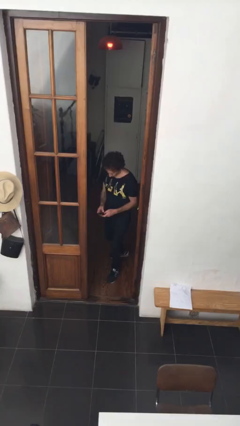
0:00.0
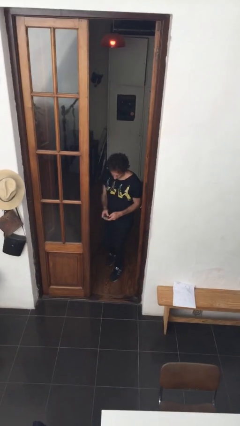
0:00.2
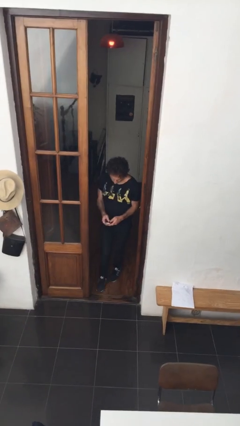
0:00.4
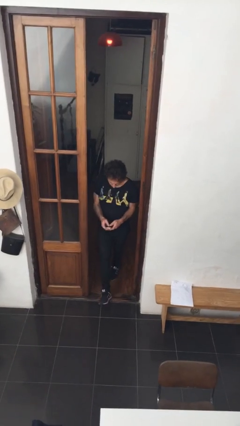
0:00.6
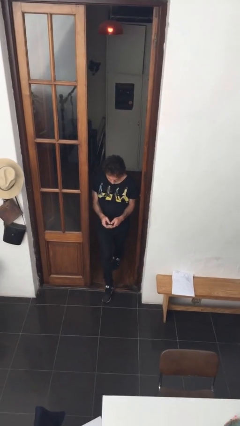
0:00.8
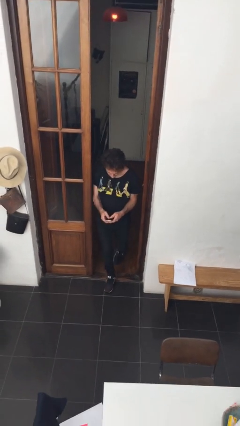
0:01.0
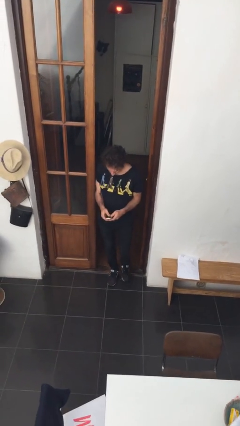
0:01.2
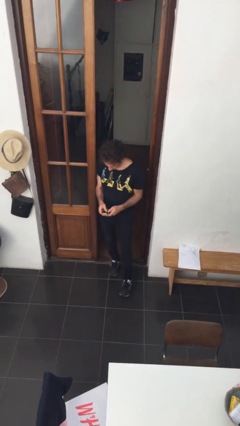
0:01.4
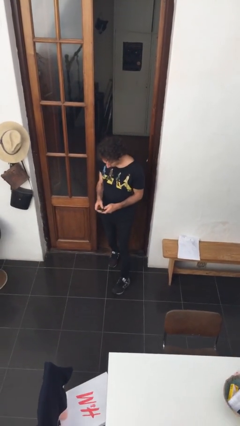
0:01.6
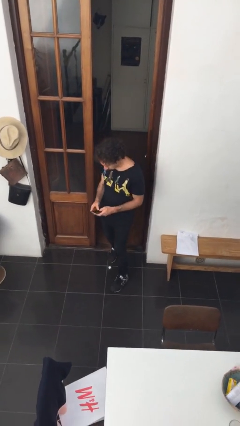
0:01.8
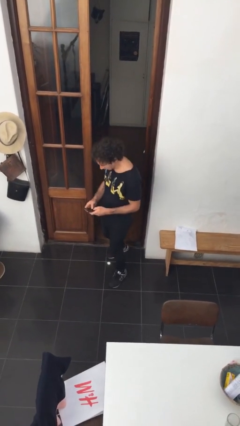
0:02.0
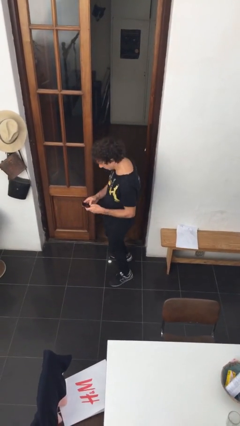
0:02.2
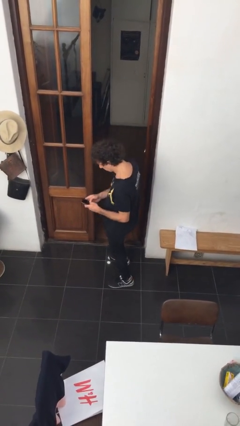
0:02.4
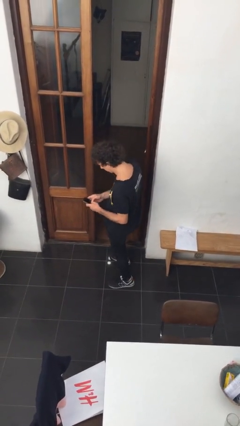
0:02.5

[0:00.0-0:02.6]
person enters scene through structure

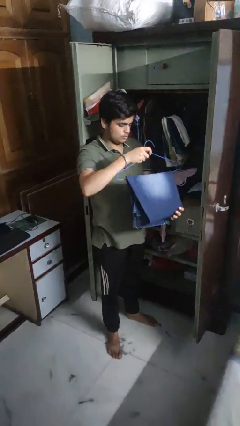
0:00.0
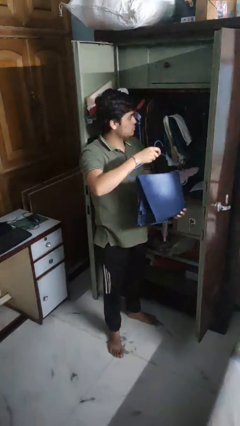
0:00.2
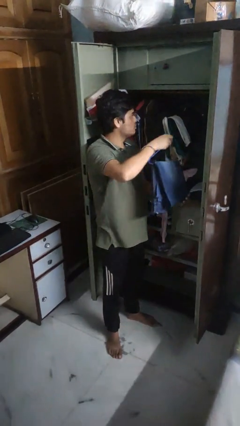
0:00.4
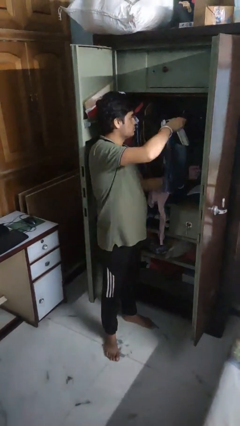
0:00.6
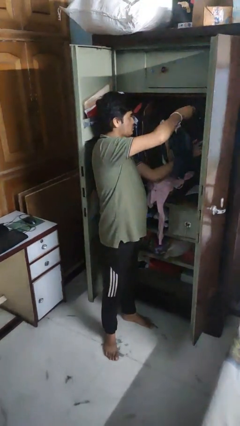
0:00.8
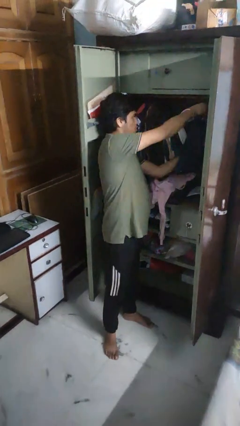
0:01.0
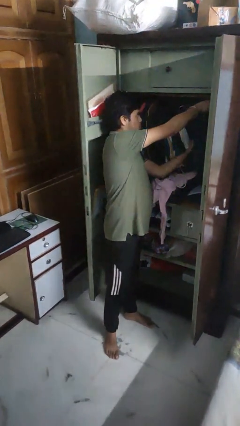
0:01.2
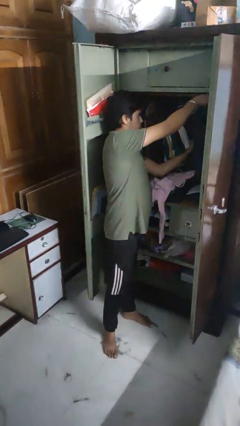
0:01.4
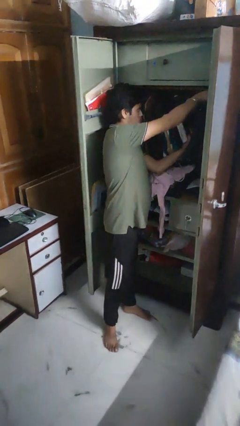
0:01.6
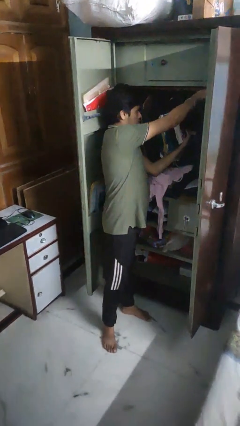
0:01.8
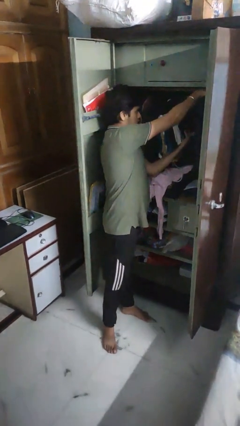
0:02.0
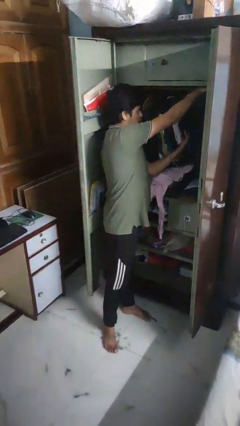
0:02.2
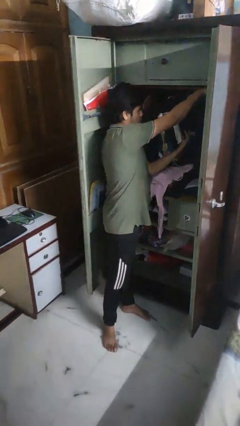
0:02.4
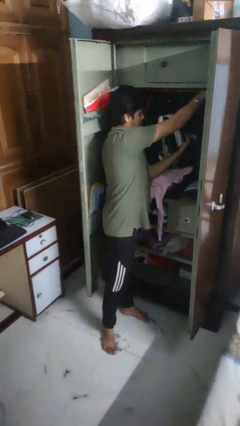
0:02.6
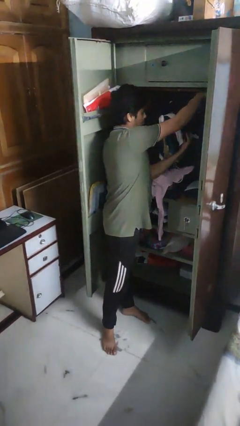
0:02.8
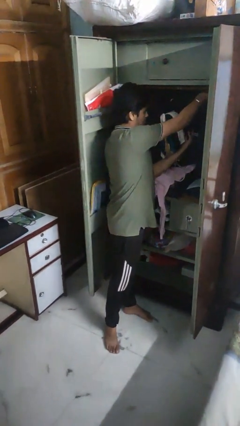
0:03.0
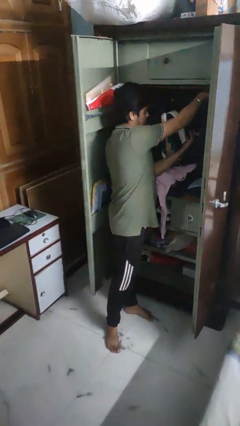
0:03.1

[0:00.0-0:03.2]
person puts clothes into closet

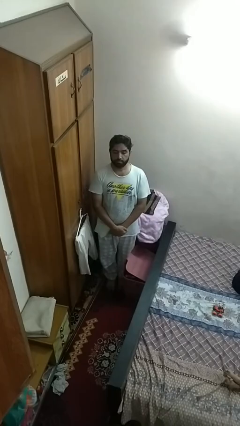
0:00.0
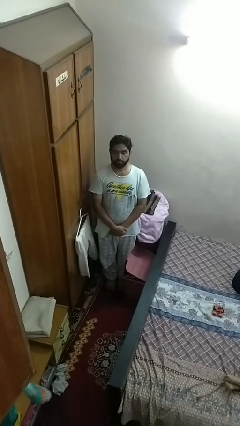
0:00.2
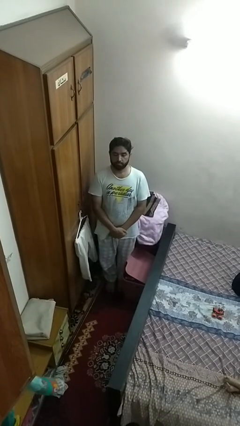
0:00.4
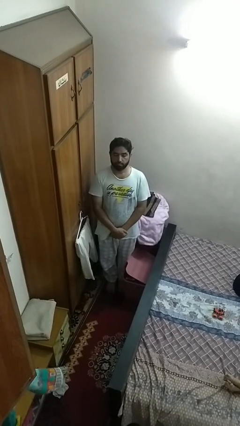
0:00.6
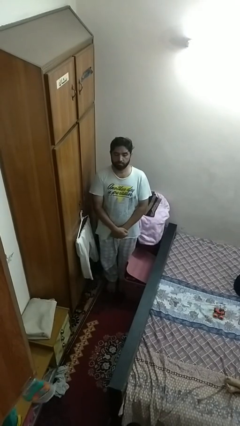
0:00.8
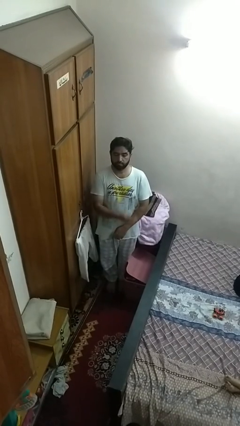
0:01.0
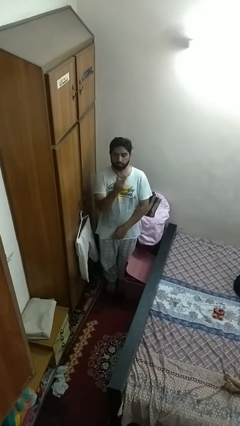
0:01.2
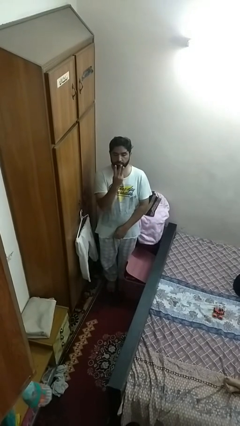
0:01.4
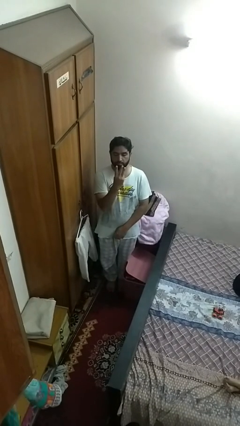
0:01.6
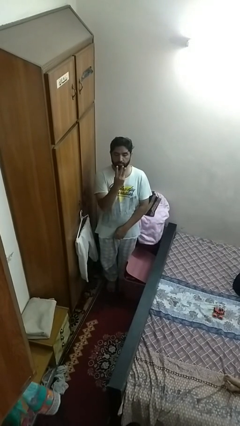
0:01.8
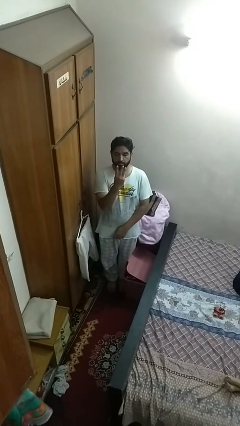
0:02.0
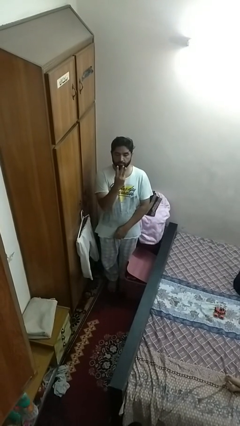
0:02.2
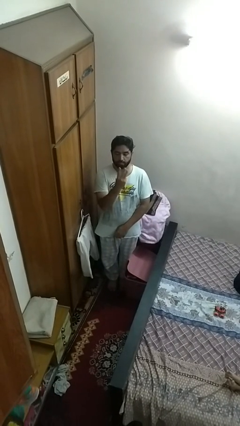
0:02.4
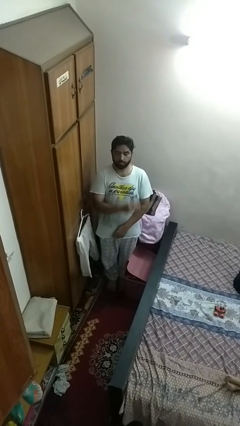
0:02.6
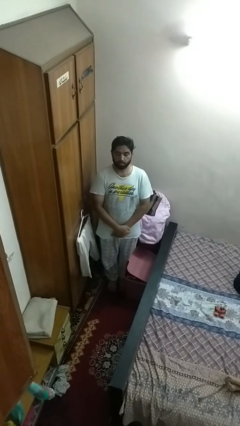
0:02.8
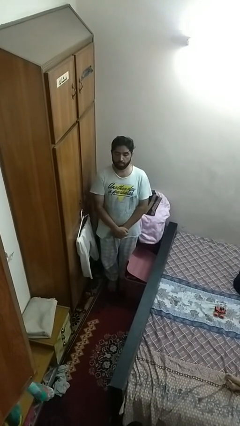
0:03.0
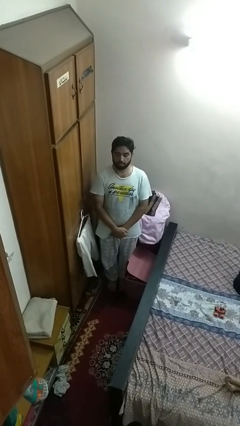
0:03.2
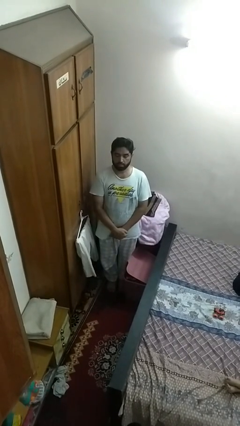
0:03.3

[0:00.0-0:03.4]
person gestures number three

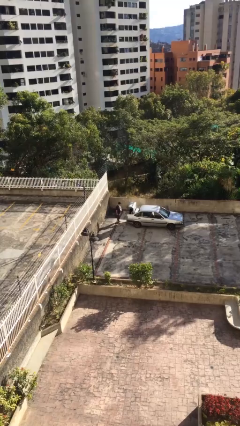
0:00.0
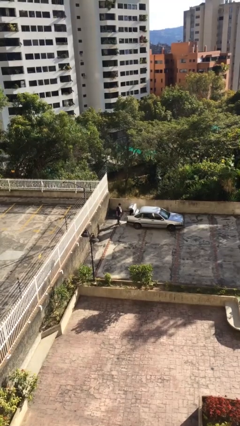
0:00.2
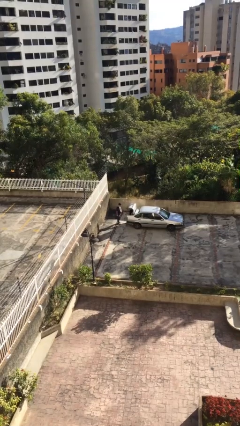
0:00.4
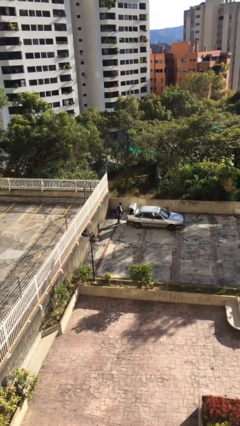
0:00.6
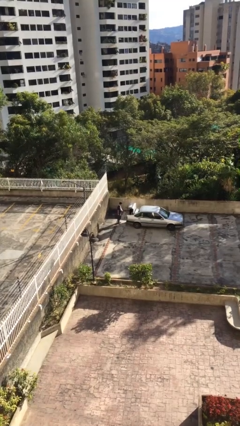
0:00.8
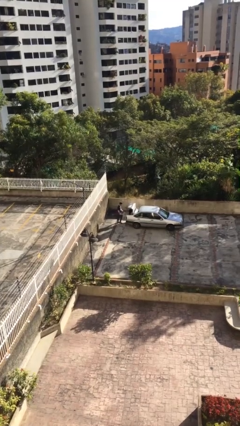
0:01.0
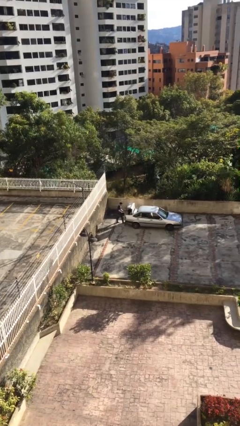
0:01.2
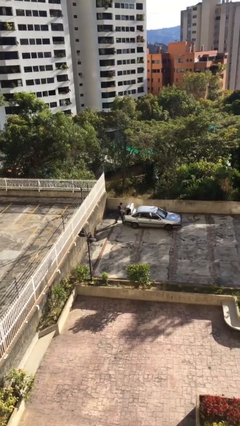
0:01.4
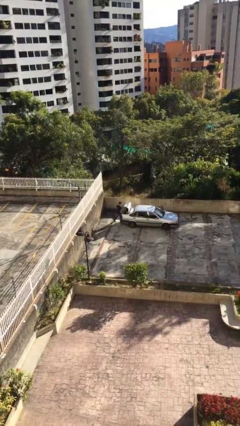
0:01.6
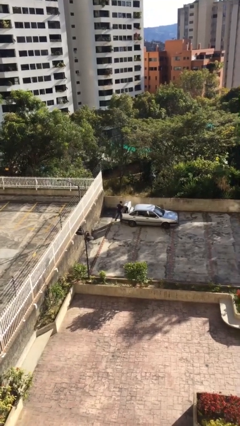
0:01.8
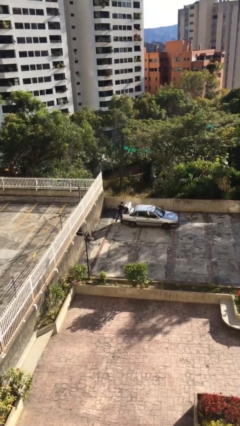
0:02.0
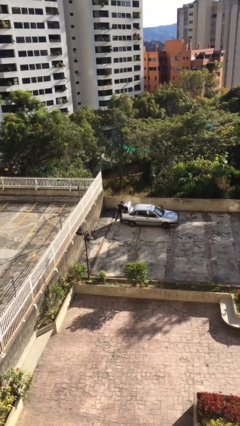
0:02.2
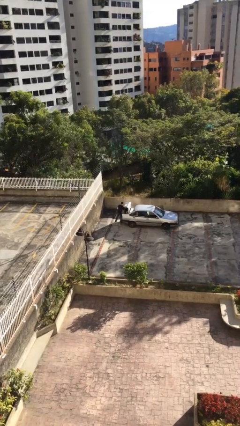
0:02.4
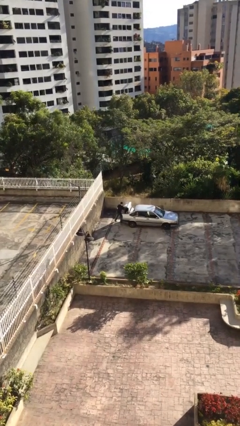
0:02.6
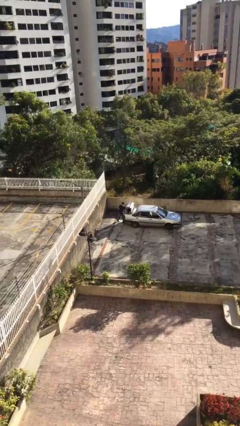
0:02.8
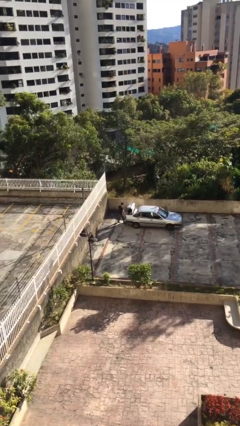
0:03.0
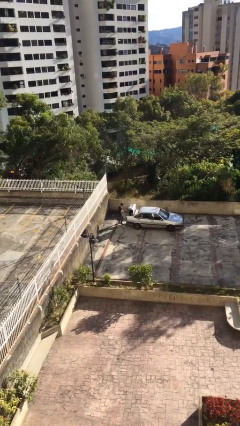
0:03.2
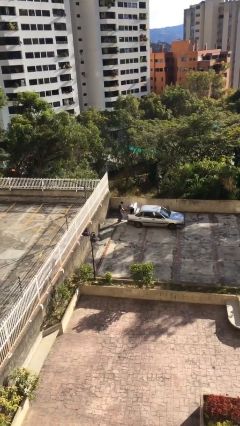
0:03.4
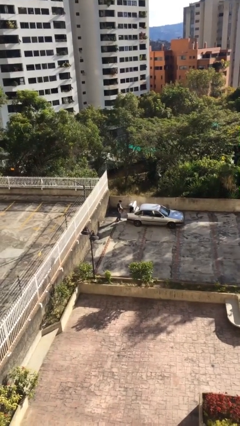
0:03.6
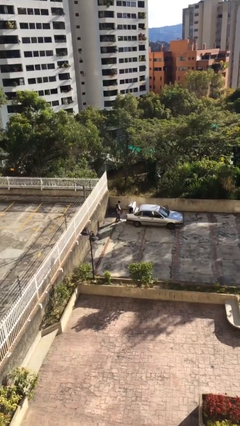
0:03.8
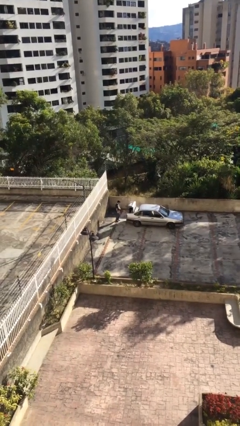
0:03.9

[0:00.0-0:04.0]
person loads car

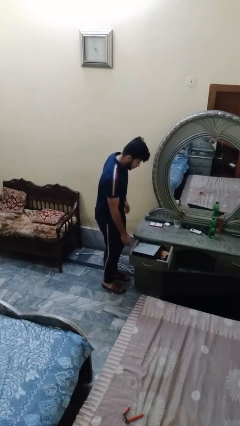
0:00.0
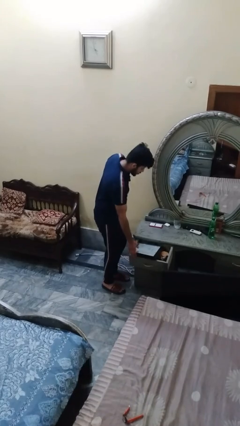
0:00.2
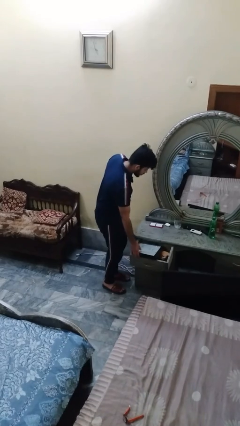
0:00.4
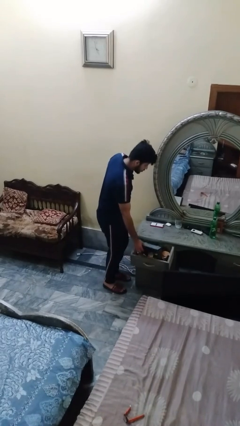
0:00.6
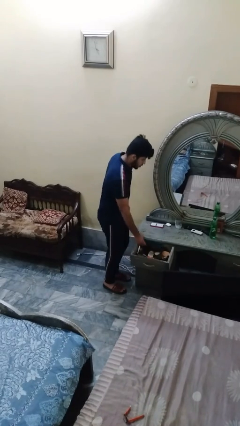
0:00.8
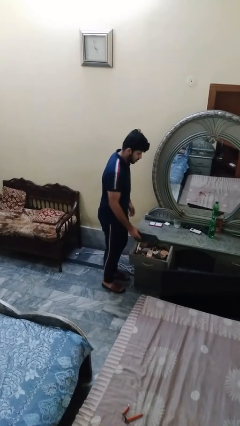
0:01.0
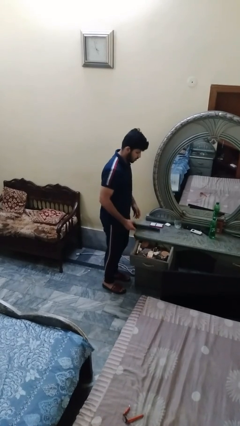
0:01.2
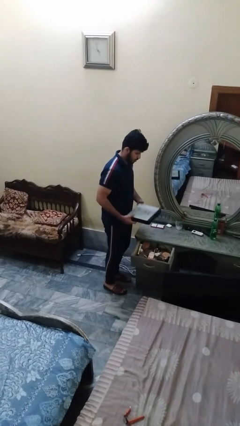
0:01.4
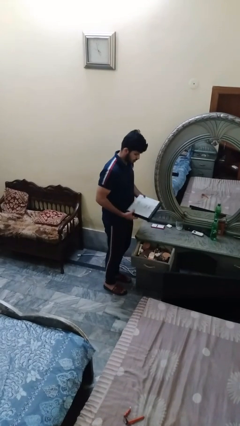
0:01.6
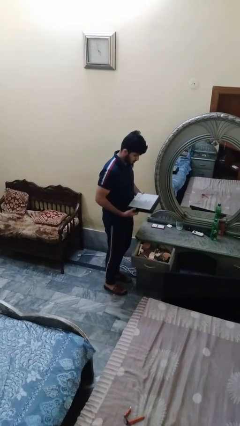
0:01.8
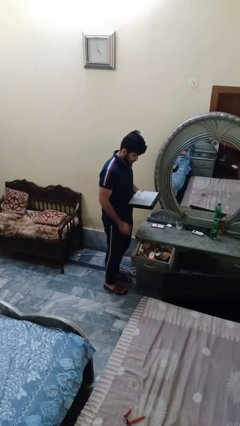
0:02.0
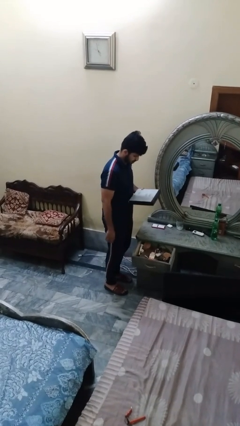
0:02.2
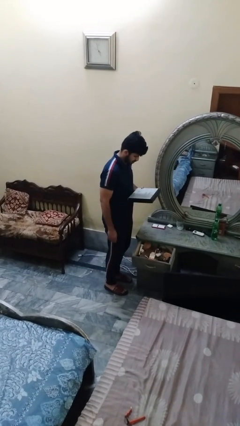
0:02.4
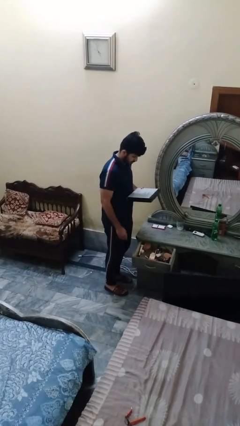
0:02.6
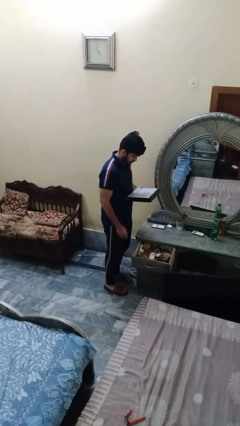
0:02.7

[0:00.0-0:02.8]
person picks up object from cabinet

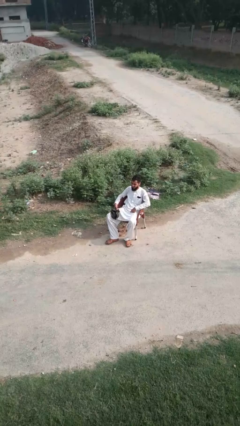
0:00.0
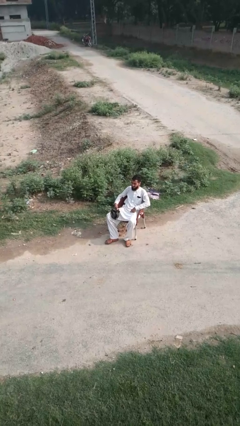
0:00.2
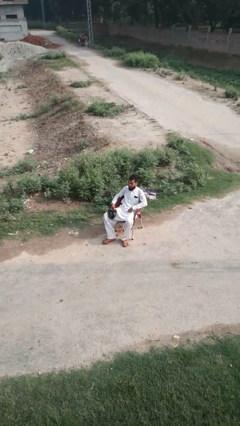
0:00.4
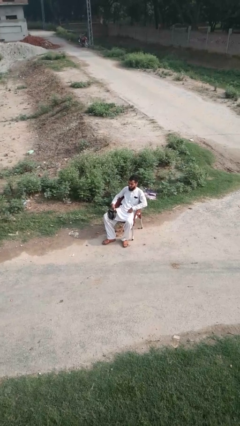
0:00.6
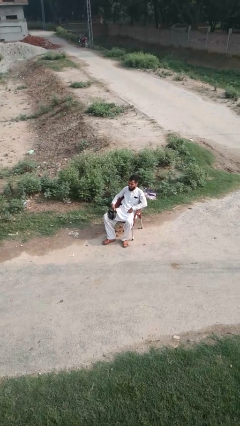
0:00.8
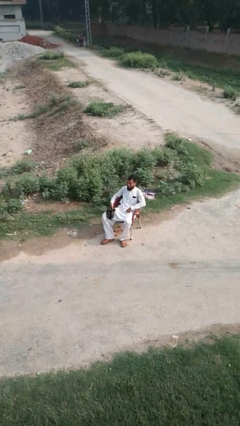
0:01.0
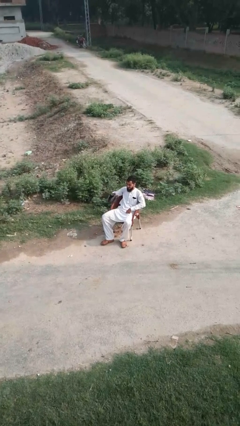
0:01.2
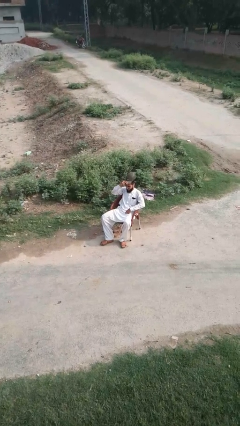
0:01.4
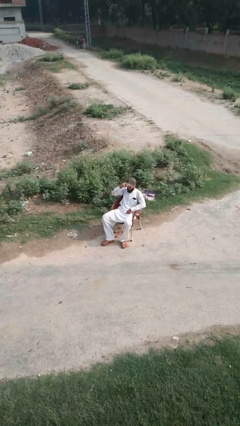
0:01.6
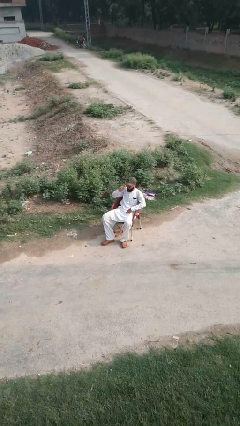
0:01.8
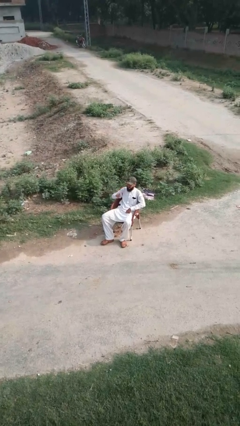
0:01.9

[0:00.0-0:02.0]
person puts on hat
